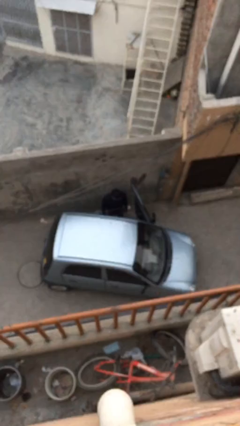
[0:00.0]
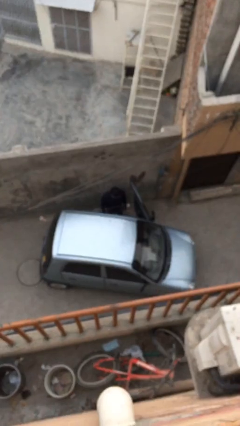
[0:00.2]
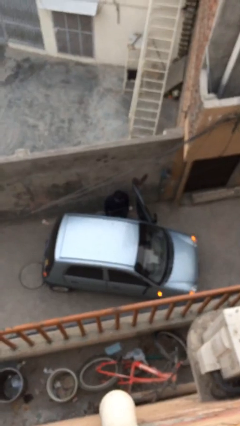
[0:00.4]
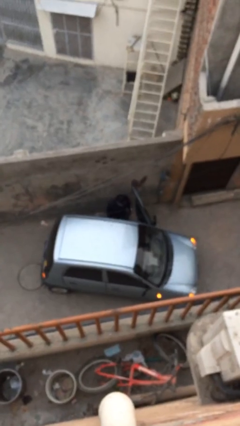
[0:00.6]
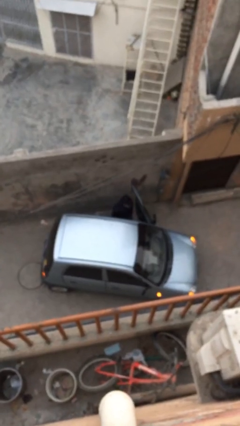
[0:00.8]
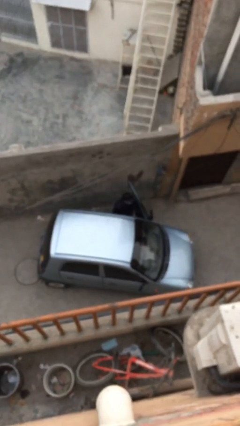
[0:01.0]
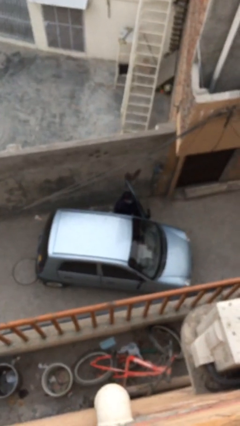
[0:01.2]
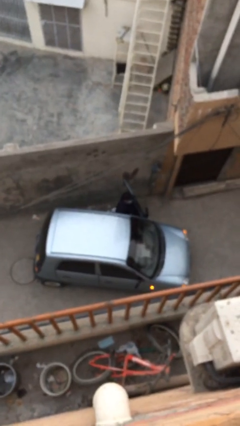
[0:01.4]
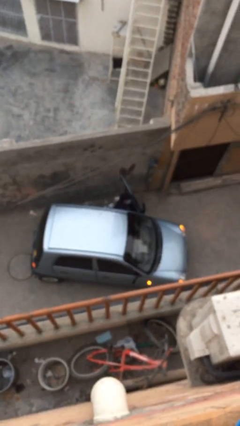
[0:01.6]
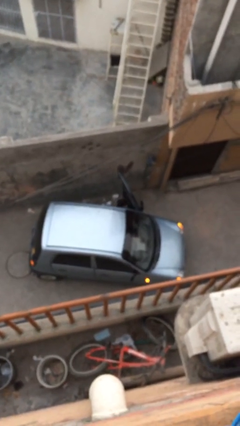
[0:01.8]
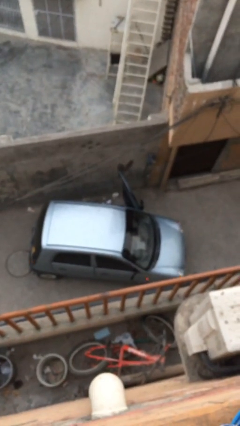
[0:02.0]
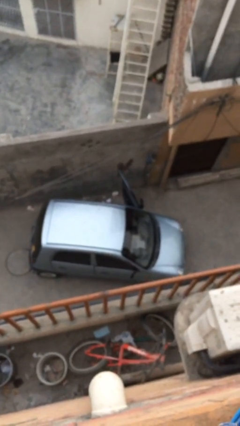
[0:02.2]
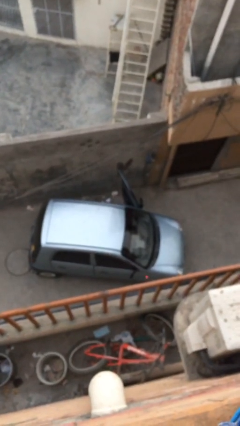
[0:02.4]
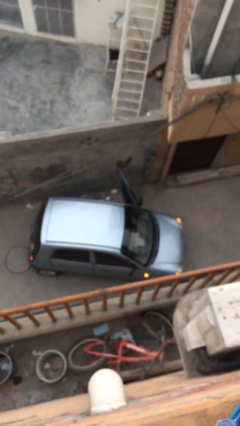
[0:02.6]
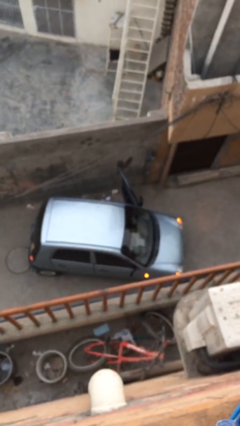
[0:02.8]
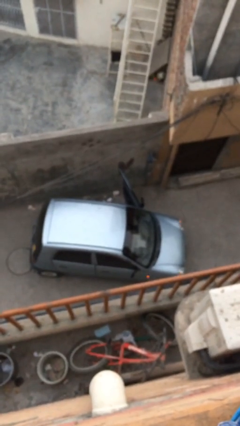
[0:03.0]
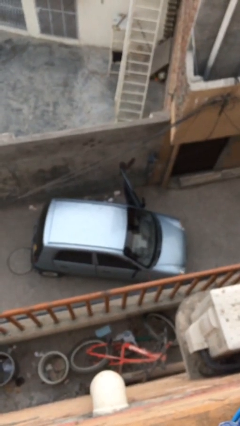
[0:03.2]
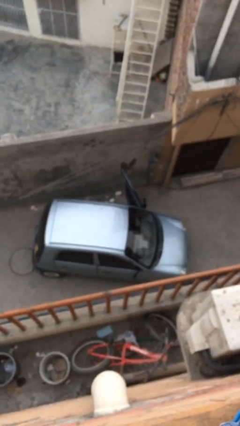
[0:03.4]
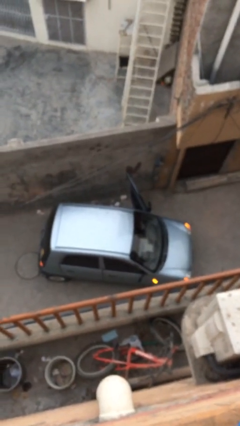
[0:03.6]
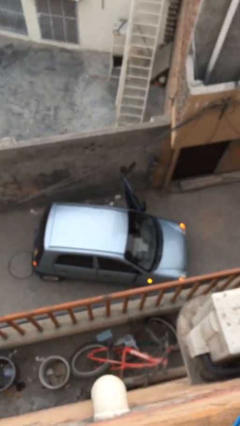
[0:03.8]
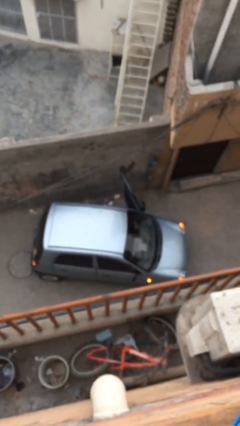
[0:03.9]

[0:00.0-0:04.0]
person enters car

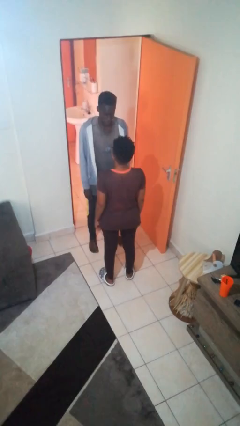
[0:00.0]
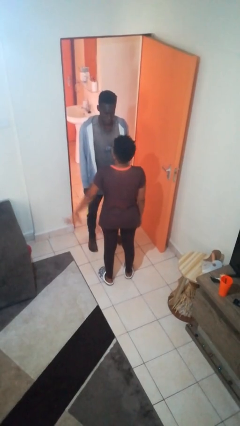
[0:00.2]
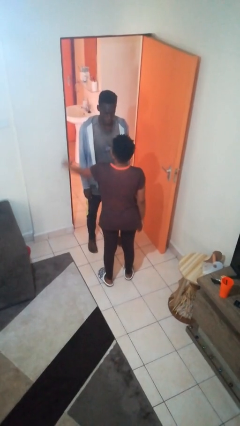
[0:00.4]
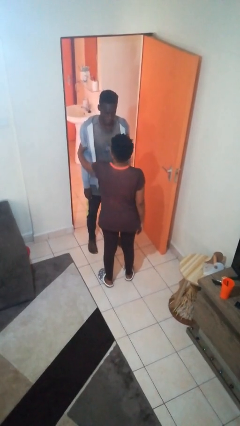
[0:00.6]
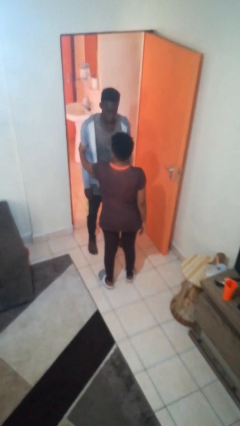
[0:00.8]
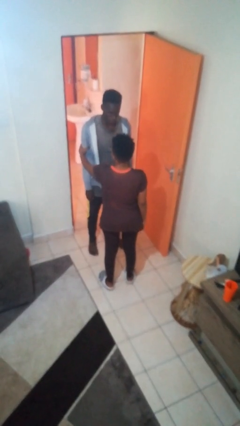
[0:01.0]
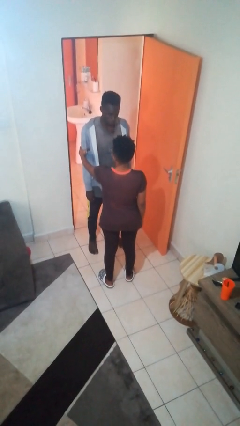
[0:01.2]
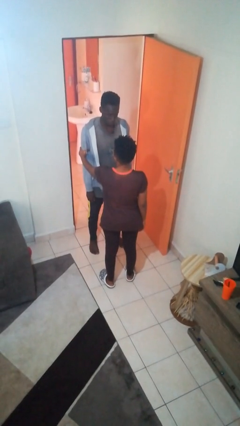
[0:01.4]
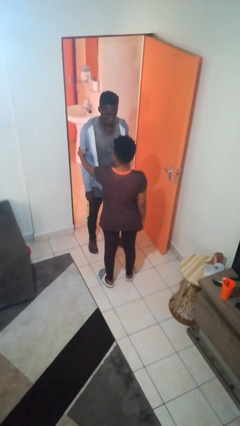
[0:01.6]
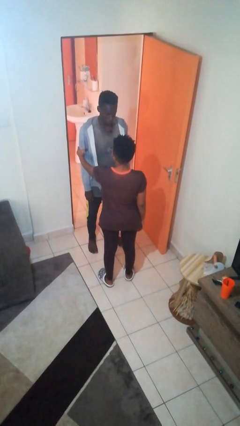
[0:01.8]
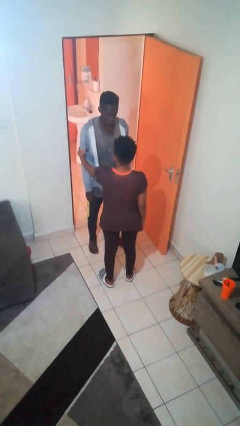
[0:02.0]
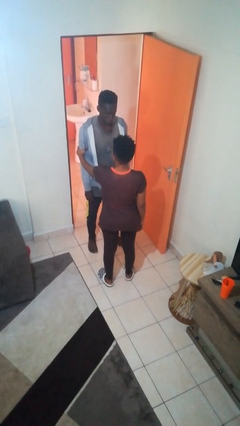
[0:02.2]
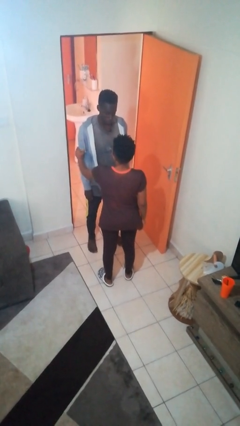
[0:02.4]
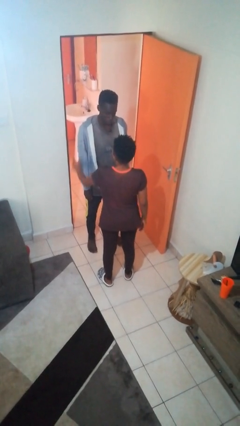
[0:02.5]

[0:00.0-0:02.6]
person grabs person by bicep

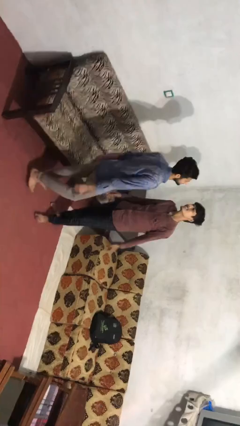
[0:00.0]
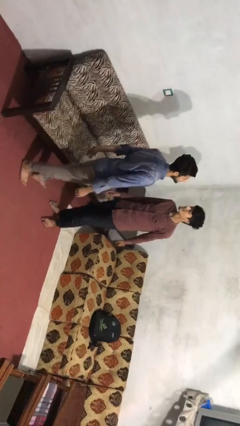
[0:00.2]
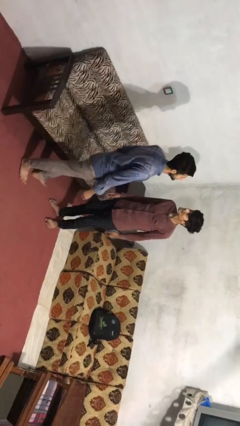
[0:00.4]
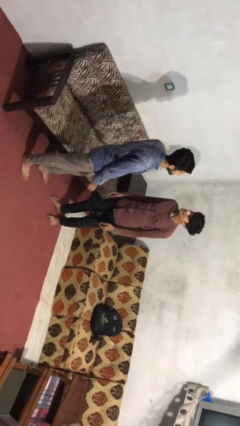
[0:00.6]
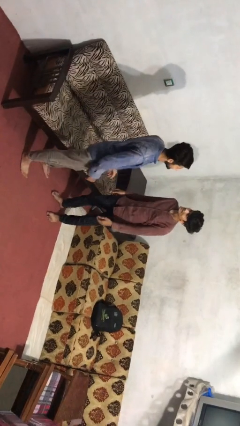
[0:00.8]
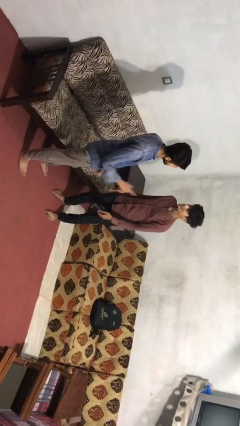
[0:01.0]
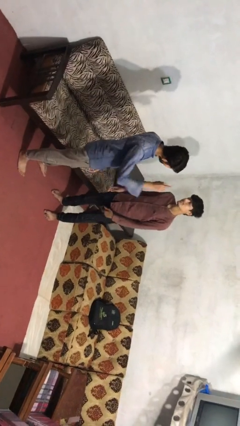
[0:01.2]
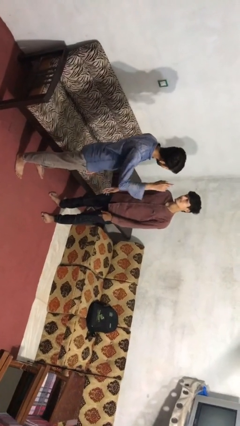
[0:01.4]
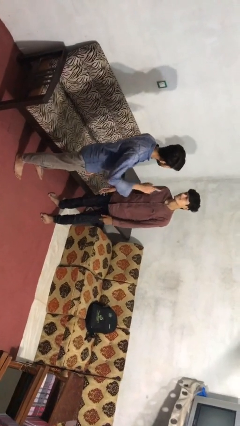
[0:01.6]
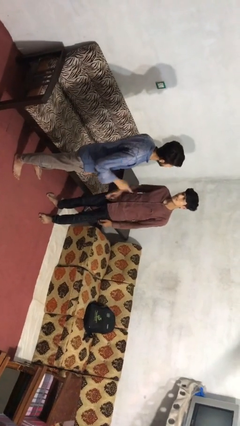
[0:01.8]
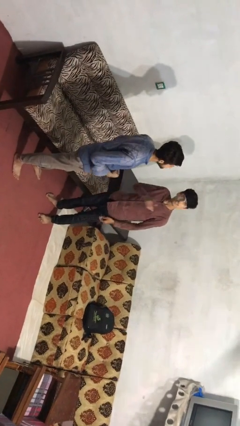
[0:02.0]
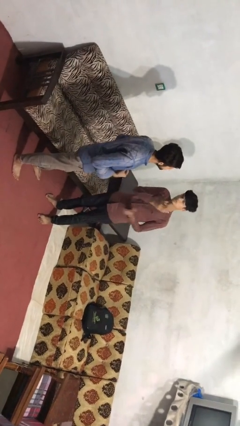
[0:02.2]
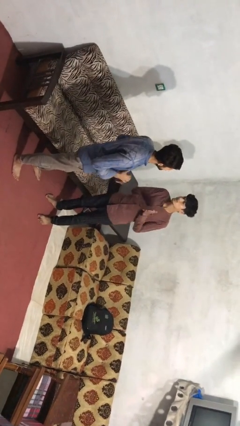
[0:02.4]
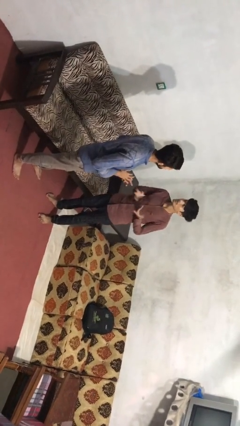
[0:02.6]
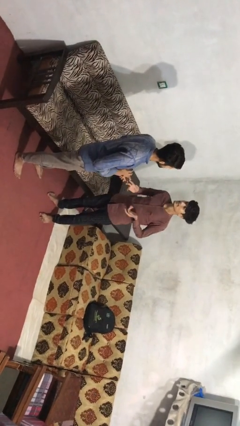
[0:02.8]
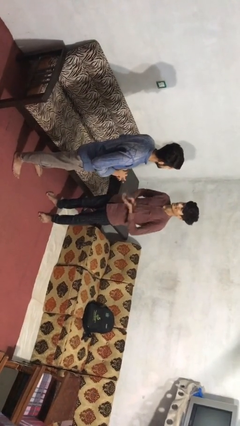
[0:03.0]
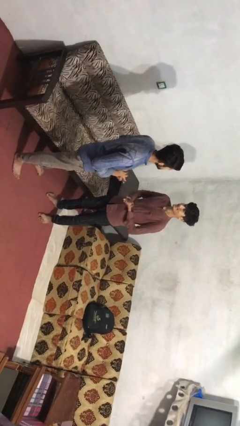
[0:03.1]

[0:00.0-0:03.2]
person talks to person

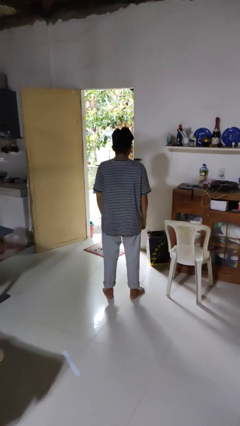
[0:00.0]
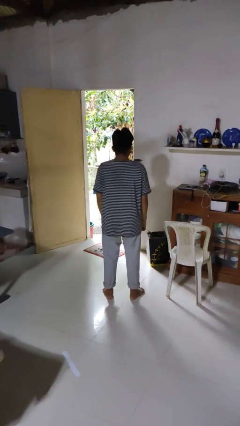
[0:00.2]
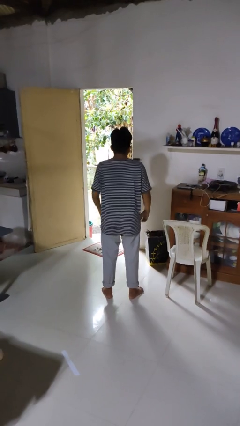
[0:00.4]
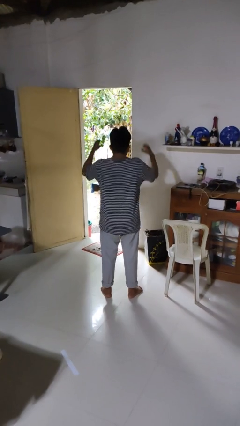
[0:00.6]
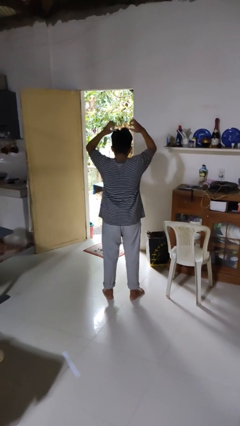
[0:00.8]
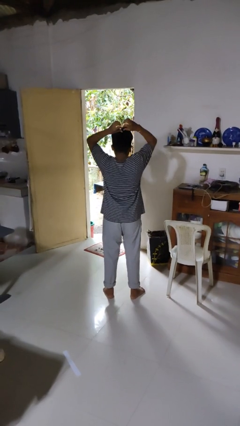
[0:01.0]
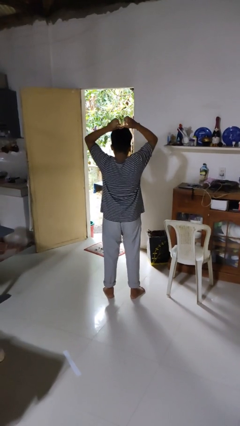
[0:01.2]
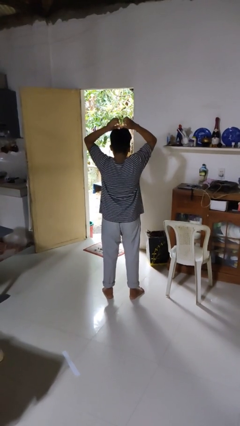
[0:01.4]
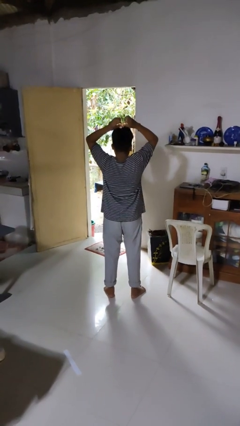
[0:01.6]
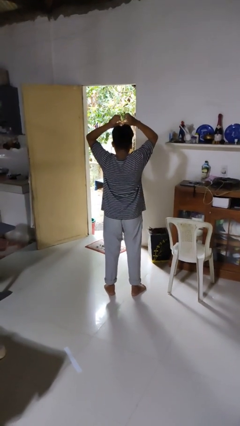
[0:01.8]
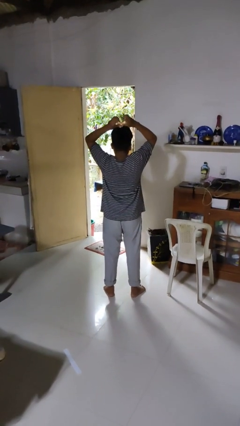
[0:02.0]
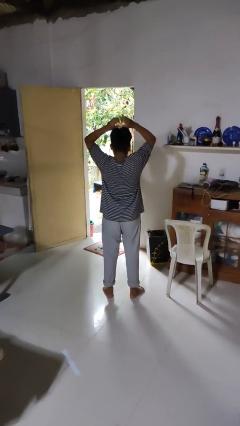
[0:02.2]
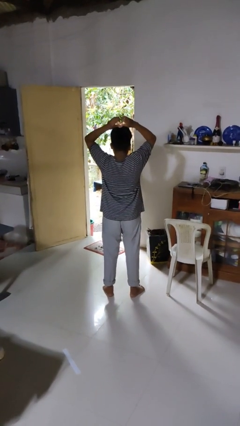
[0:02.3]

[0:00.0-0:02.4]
person gestures heart

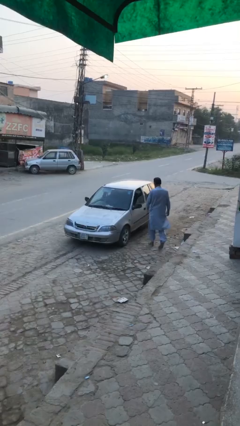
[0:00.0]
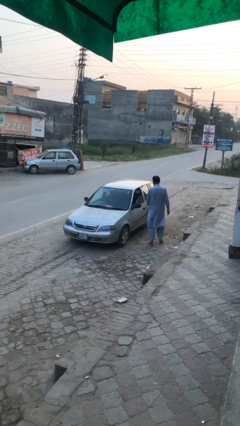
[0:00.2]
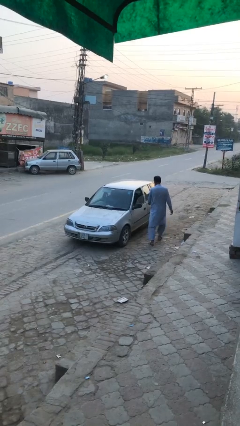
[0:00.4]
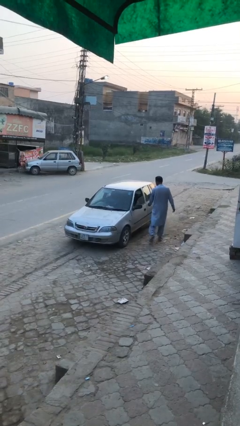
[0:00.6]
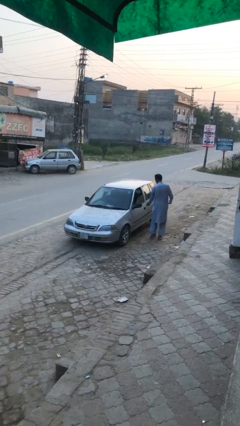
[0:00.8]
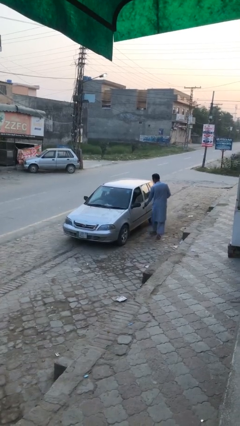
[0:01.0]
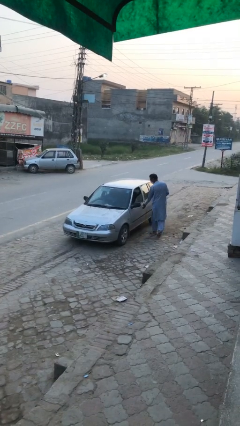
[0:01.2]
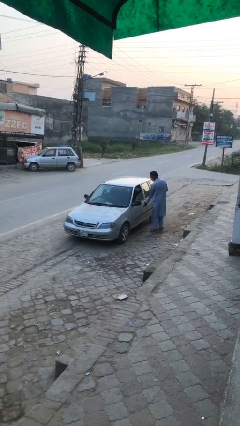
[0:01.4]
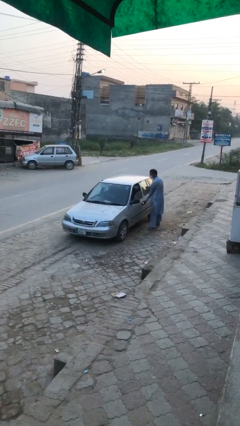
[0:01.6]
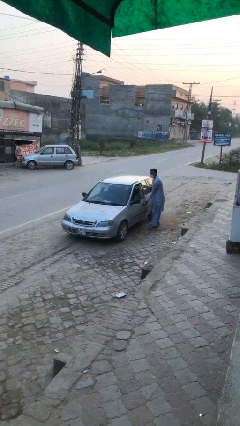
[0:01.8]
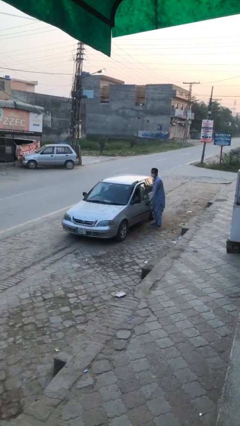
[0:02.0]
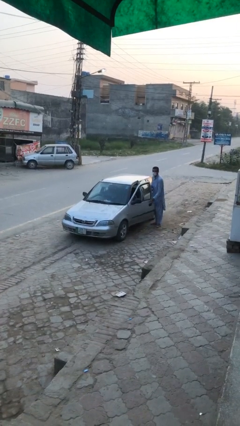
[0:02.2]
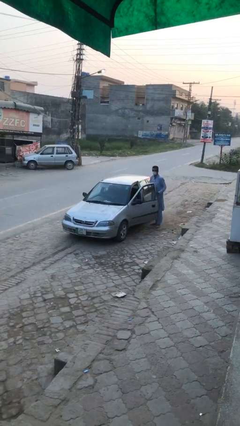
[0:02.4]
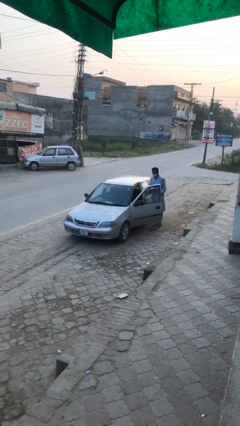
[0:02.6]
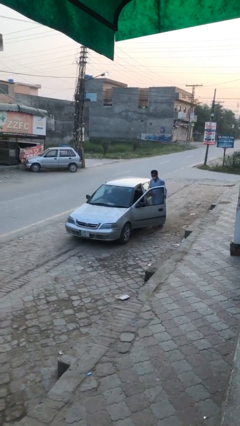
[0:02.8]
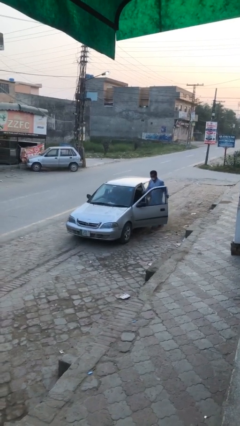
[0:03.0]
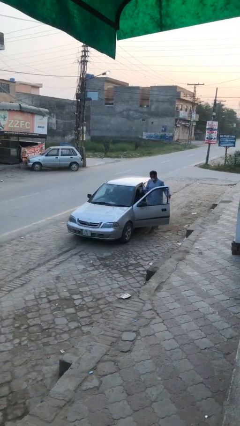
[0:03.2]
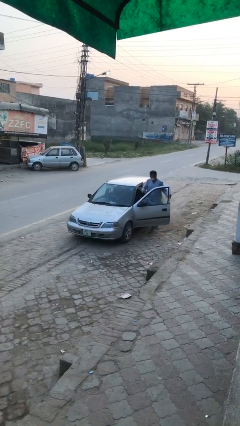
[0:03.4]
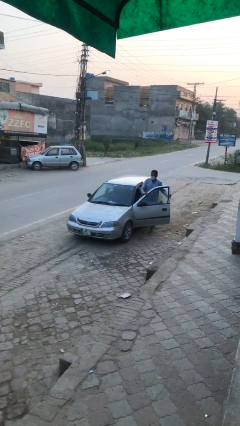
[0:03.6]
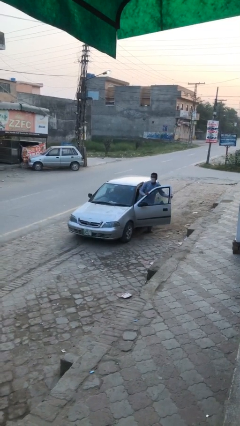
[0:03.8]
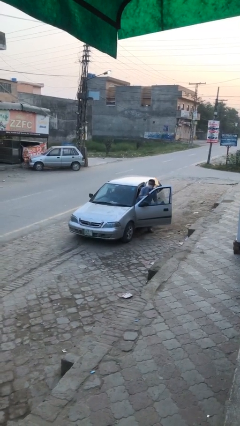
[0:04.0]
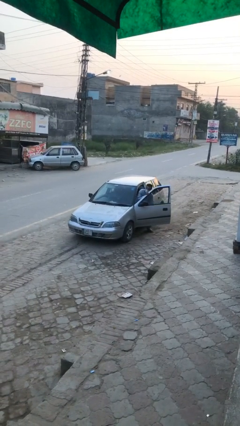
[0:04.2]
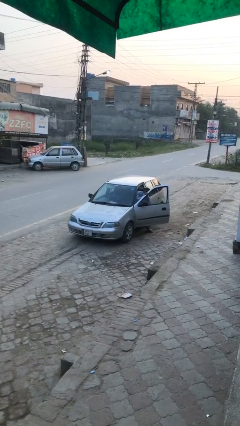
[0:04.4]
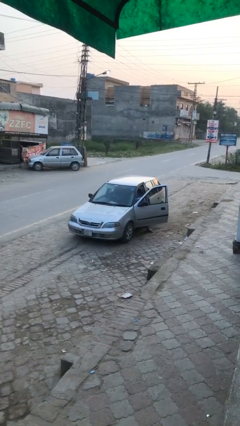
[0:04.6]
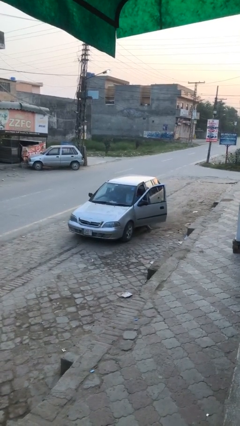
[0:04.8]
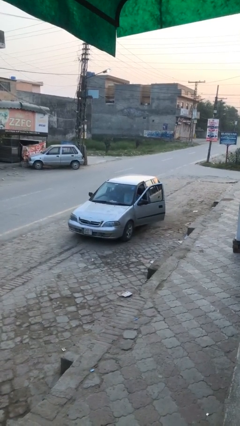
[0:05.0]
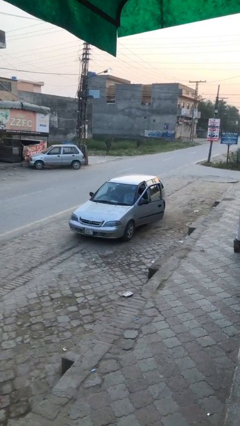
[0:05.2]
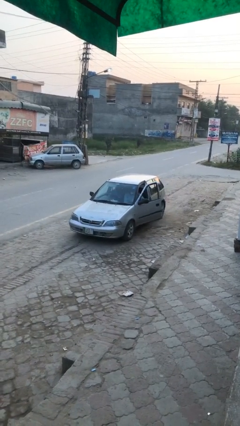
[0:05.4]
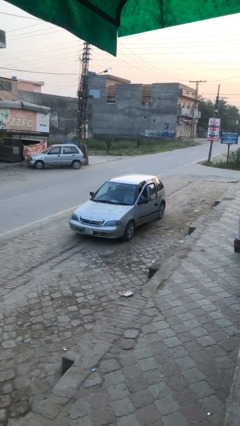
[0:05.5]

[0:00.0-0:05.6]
car picks up person
